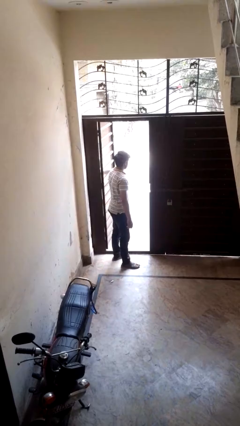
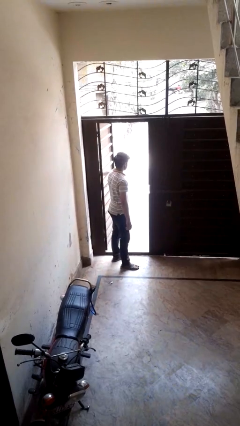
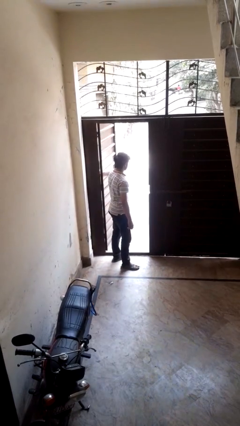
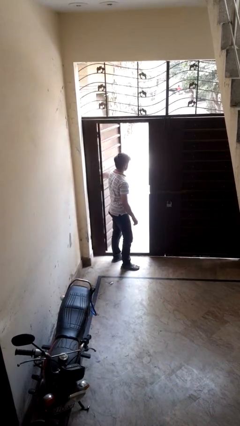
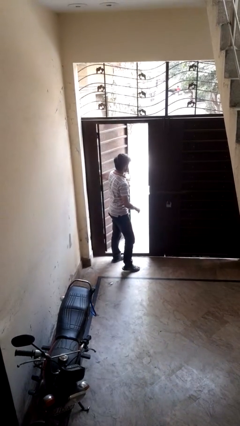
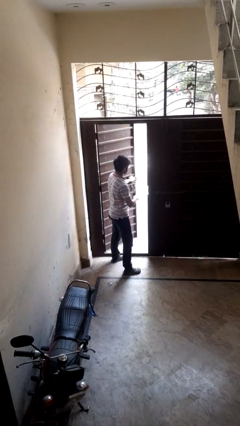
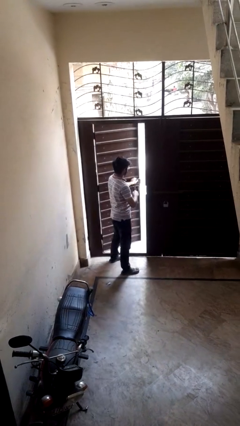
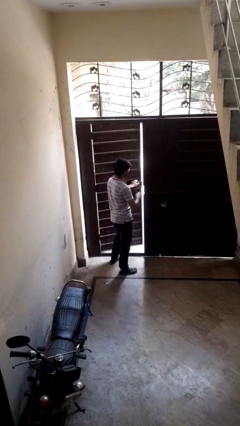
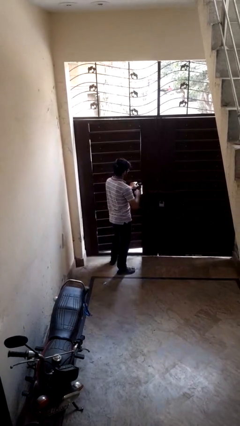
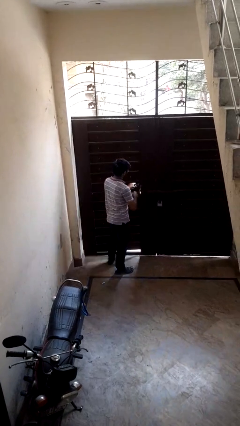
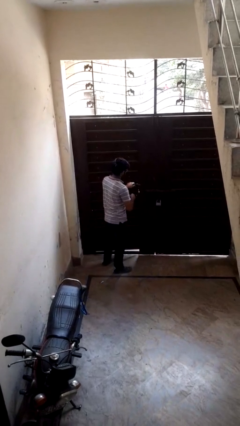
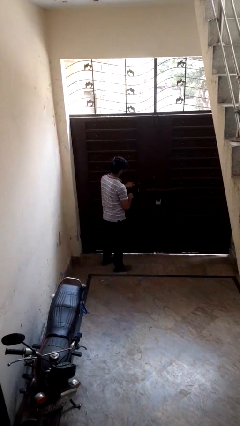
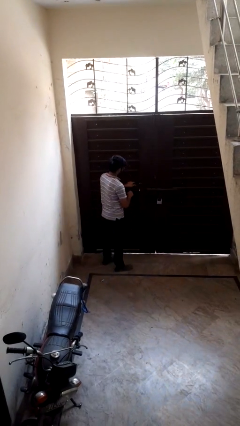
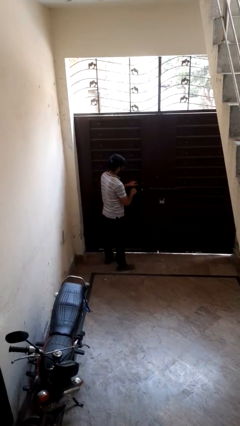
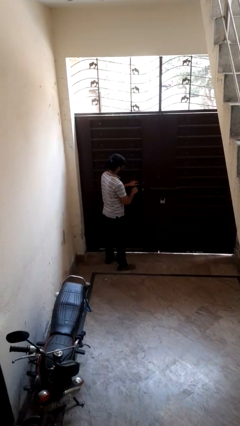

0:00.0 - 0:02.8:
person closes facility door

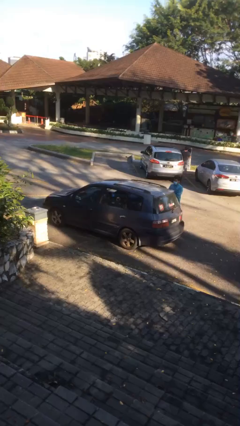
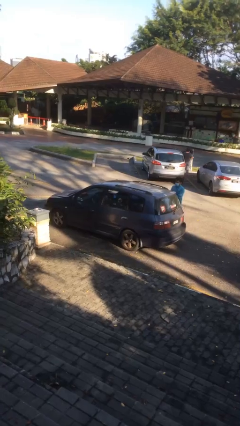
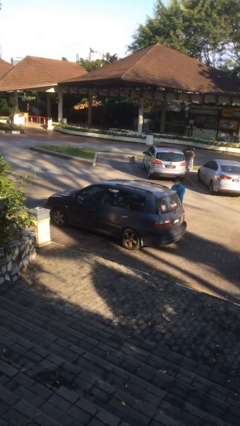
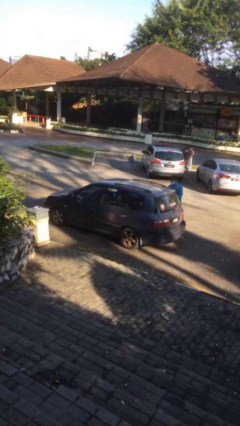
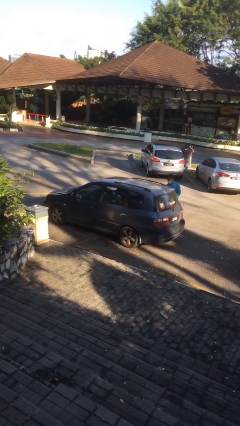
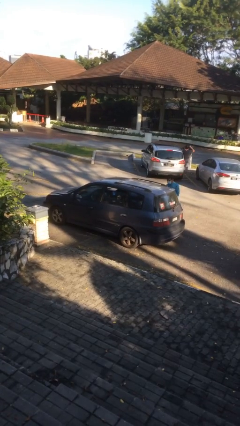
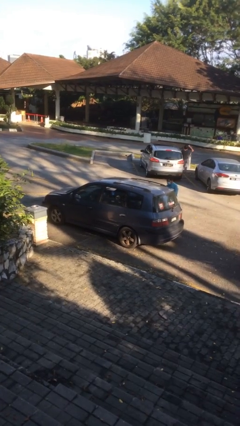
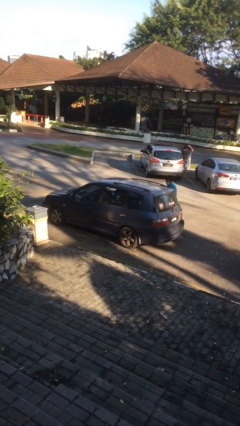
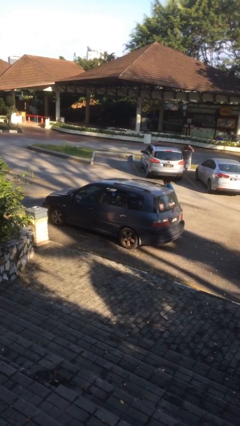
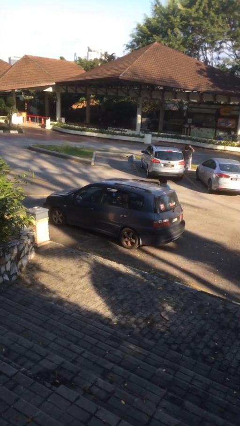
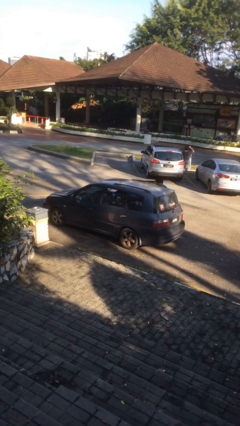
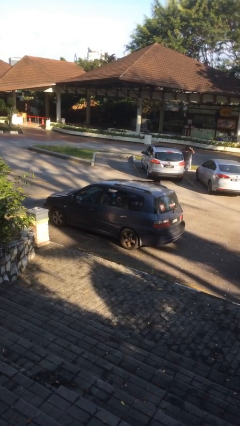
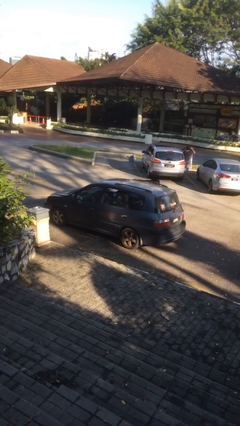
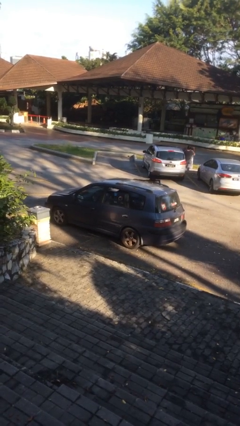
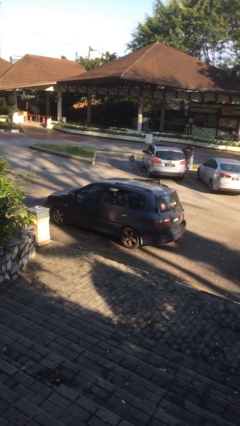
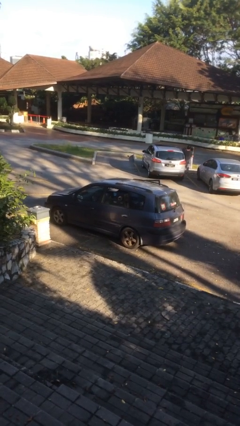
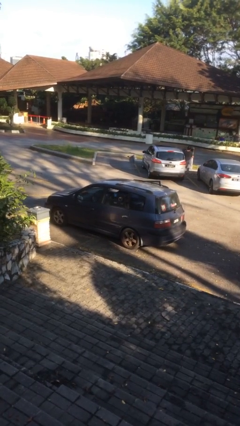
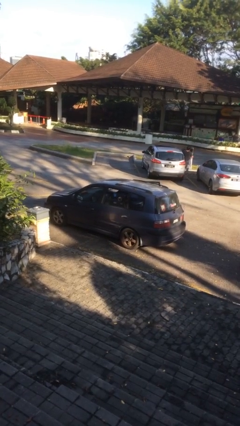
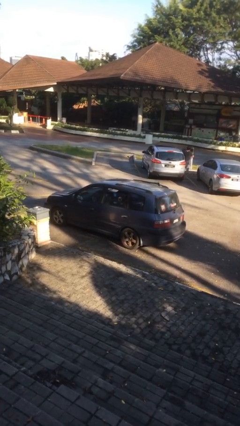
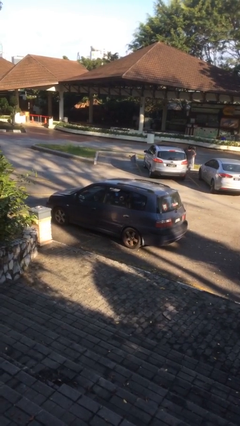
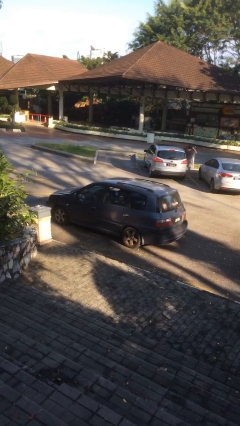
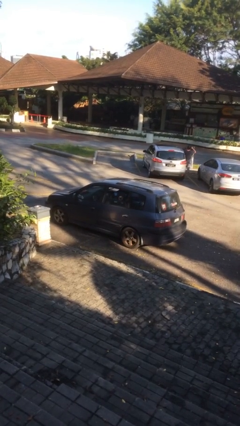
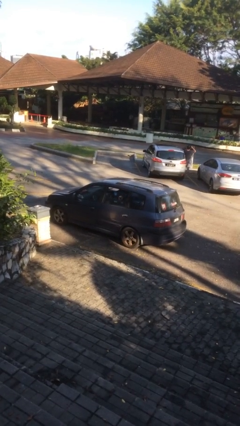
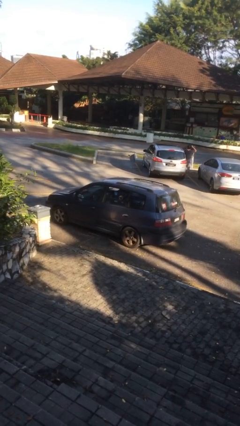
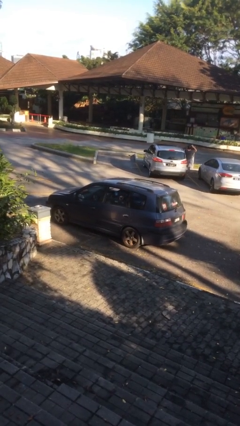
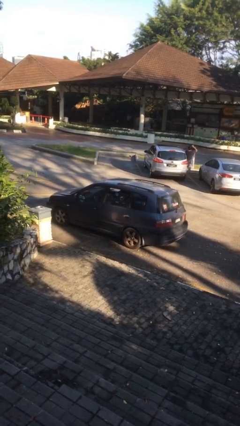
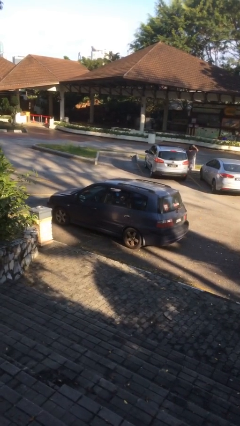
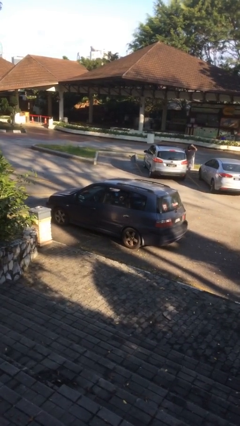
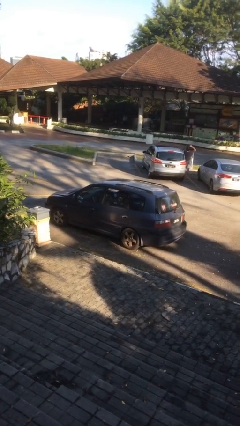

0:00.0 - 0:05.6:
car picks up person

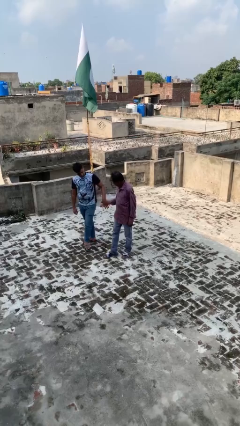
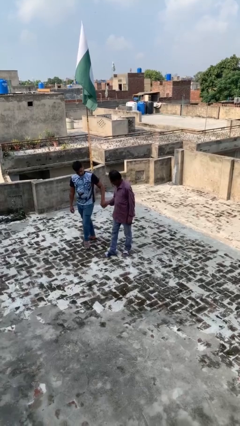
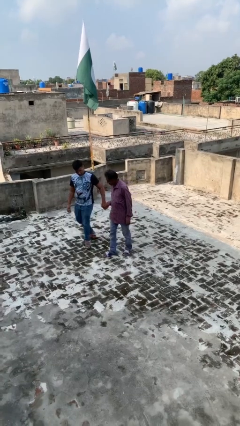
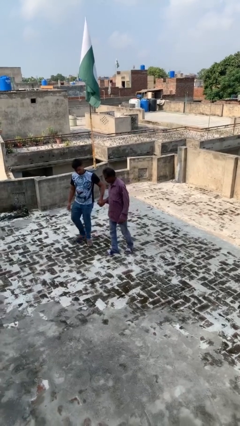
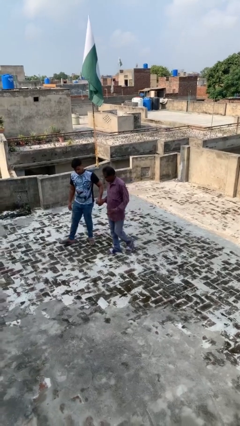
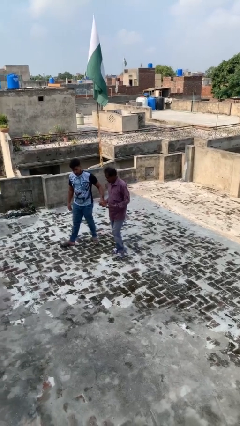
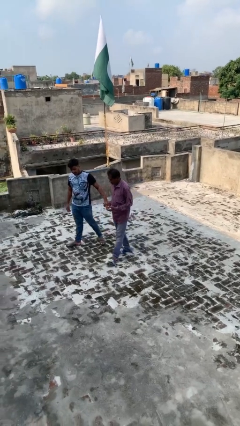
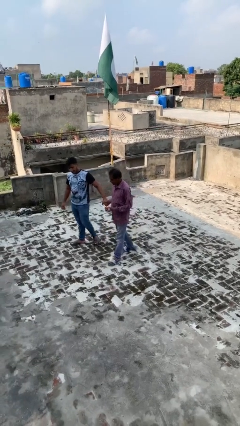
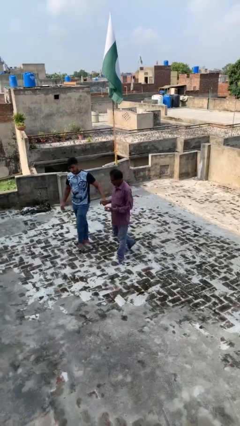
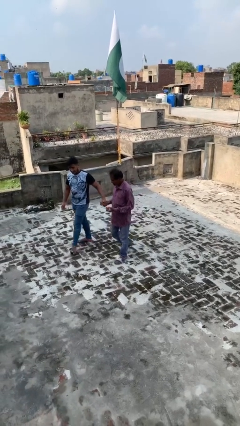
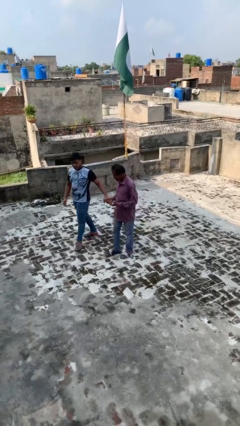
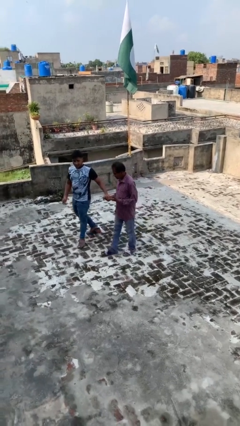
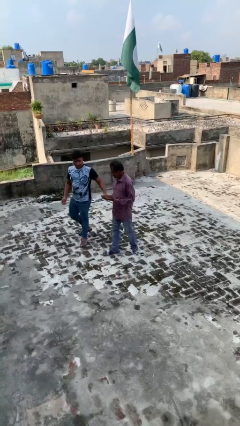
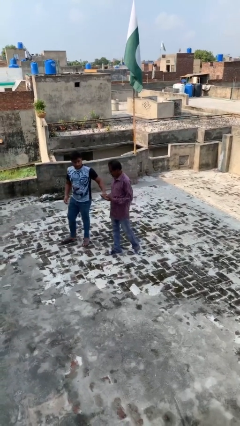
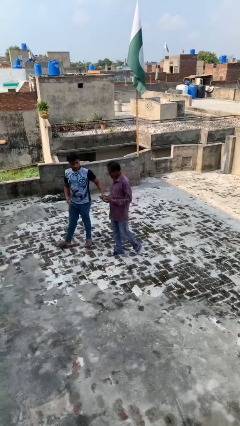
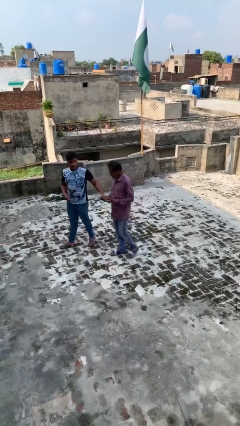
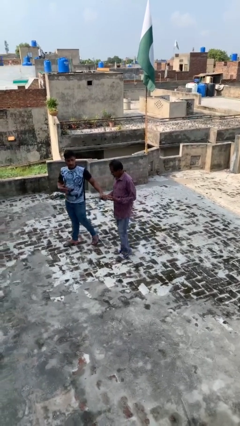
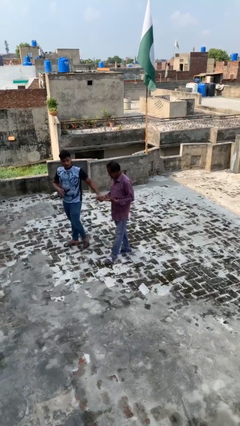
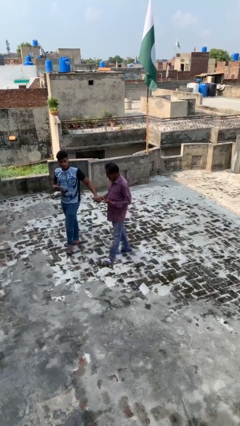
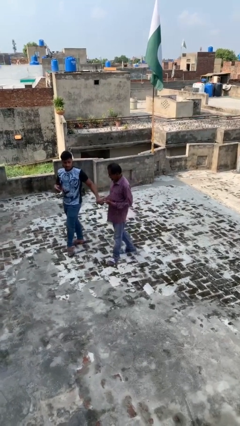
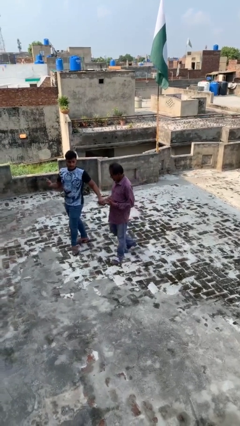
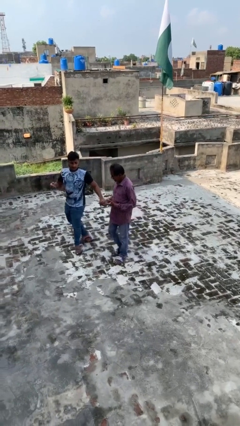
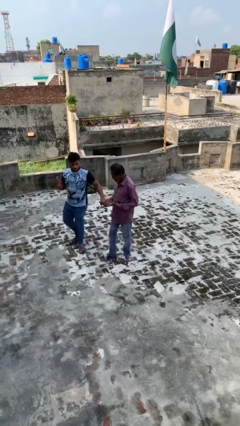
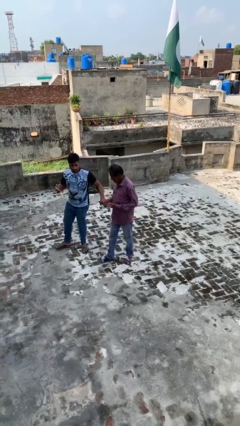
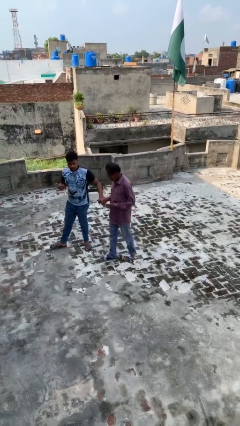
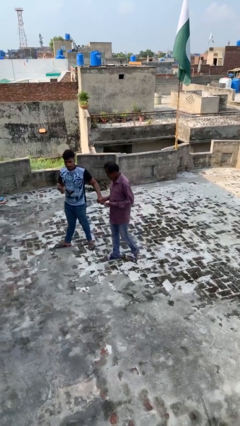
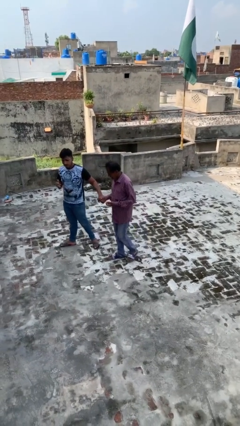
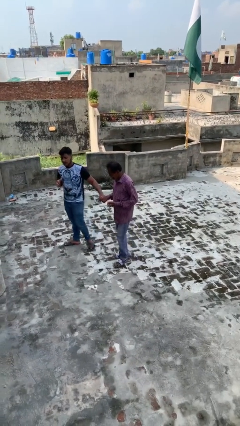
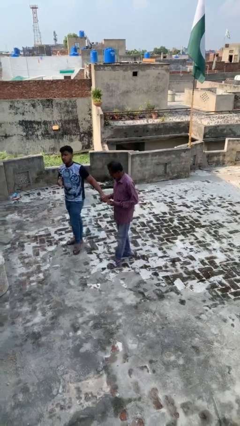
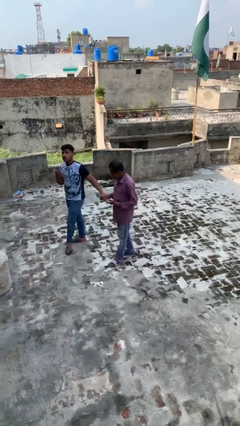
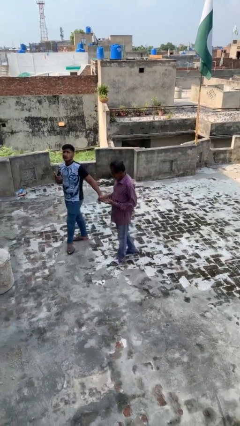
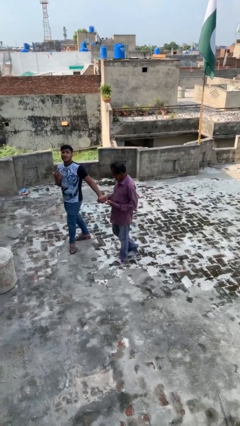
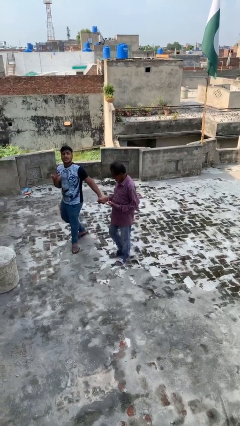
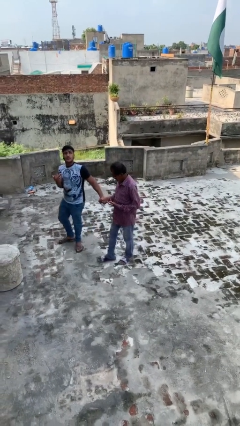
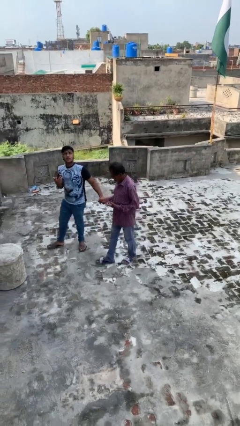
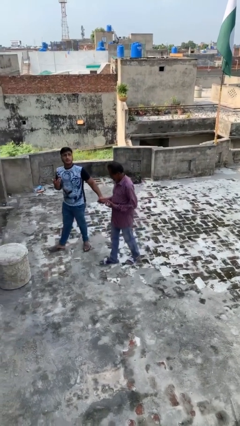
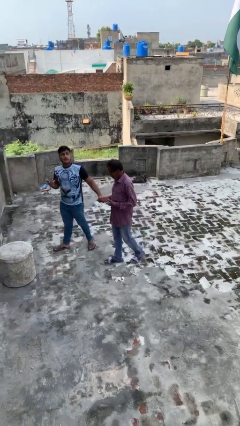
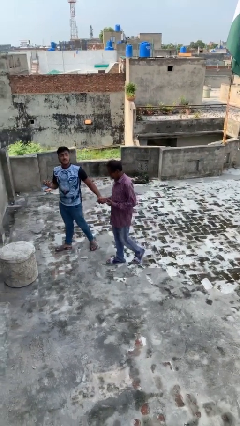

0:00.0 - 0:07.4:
person holds hand

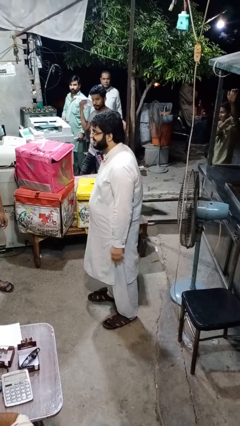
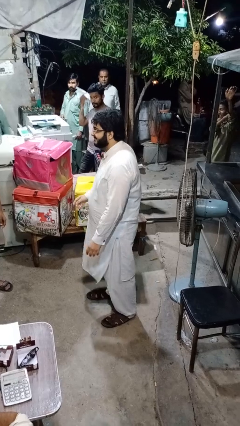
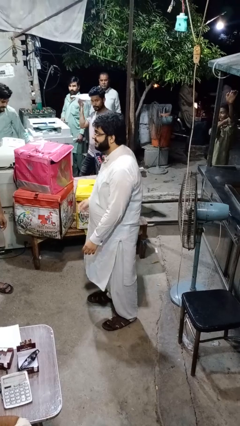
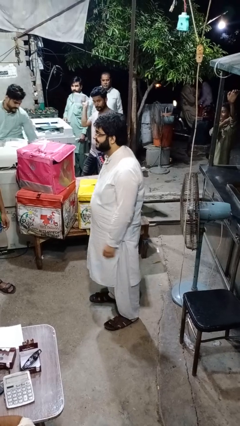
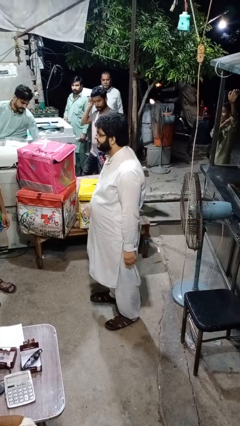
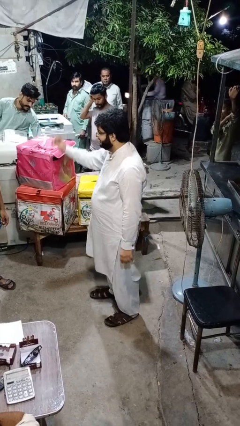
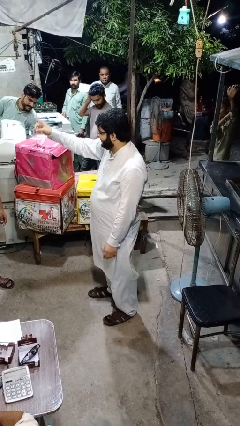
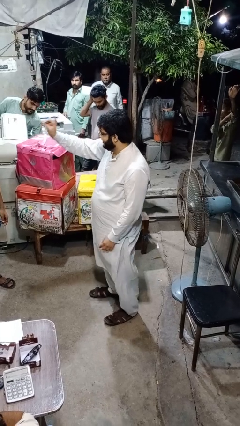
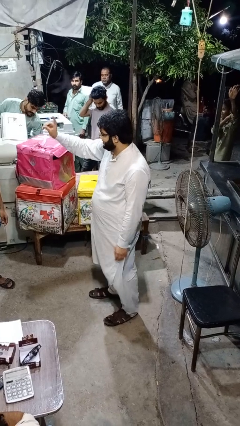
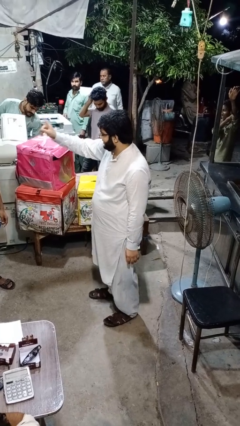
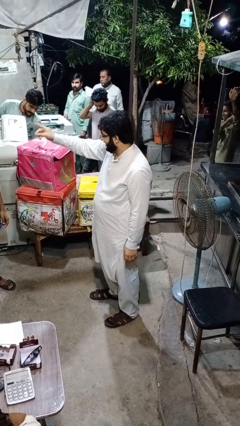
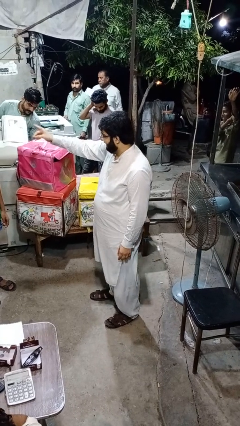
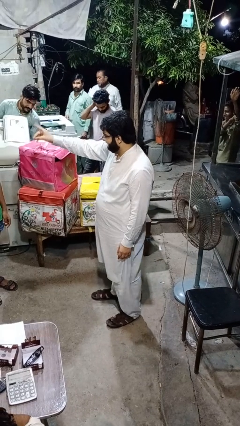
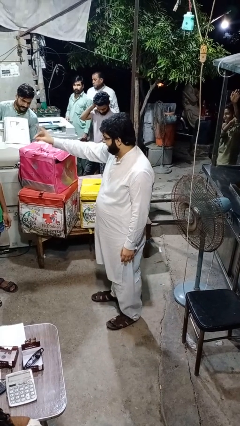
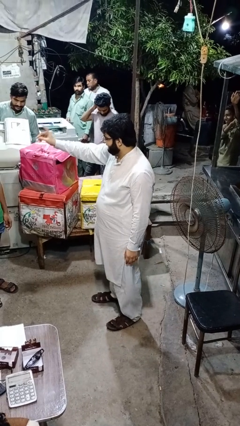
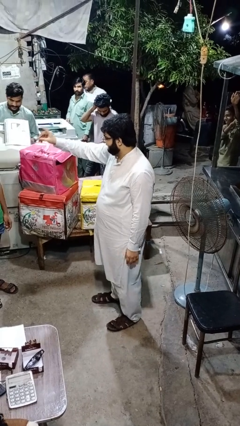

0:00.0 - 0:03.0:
person points at person
